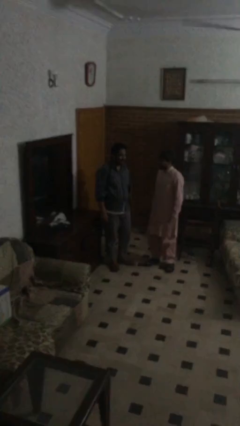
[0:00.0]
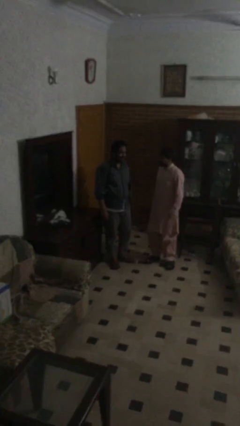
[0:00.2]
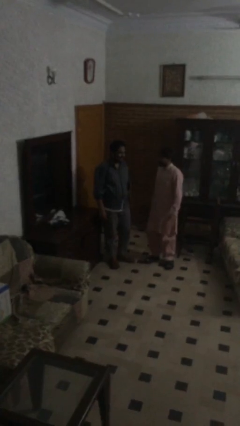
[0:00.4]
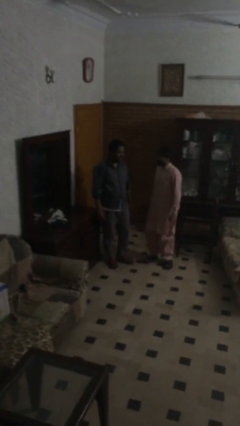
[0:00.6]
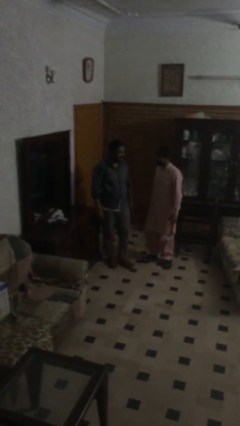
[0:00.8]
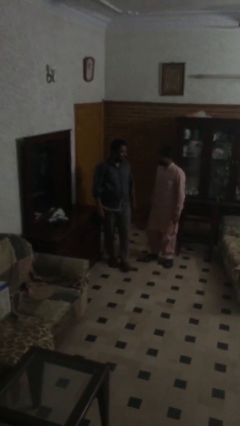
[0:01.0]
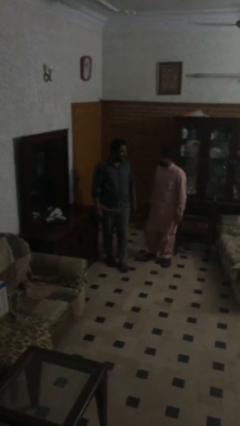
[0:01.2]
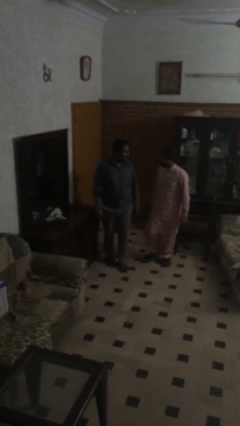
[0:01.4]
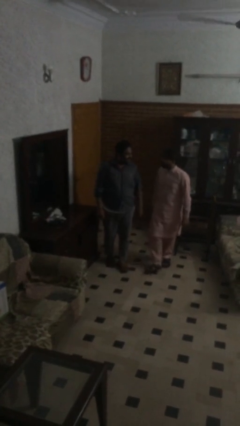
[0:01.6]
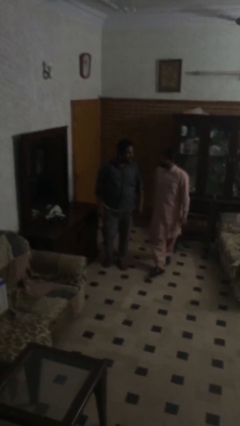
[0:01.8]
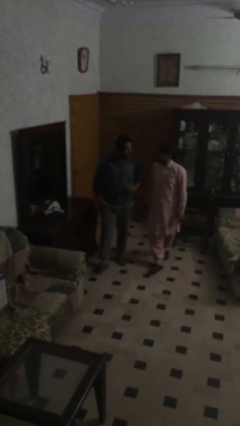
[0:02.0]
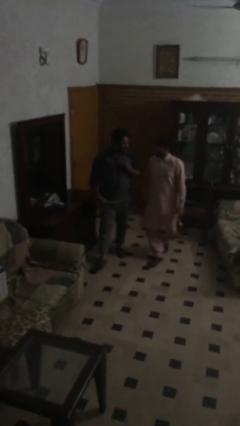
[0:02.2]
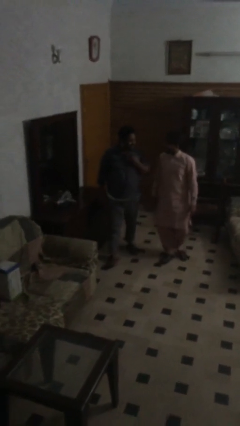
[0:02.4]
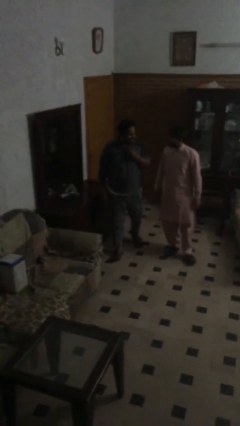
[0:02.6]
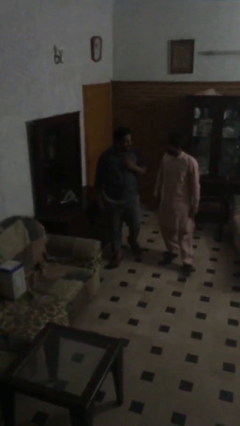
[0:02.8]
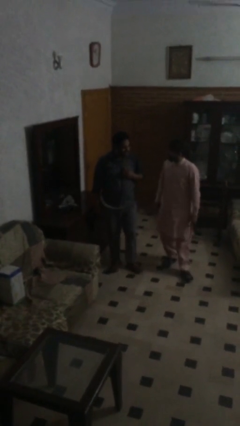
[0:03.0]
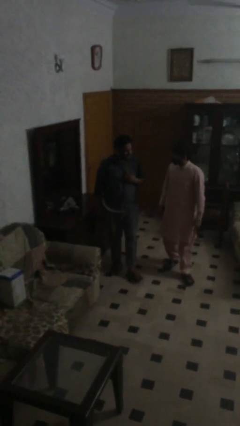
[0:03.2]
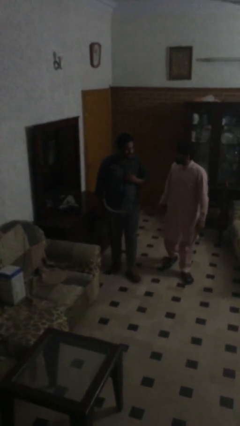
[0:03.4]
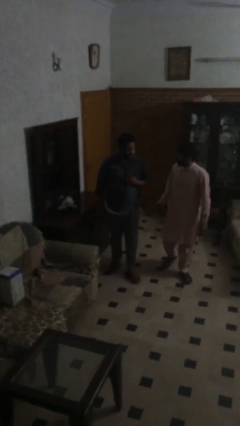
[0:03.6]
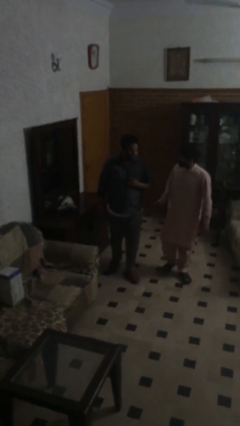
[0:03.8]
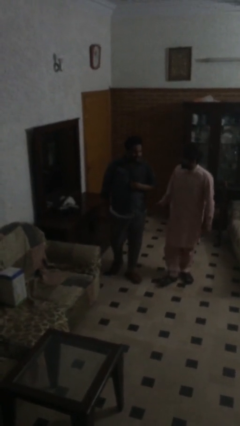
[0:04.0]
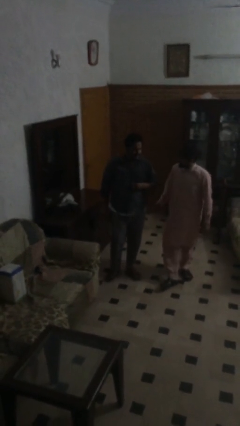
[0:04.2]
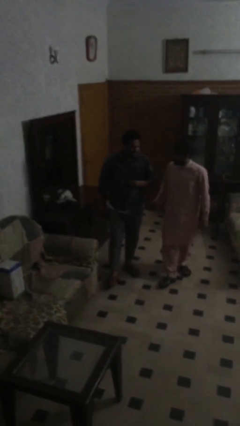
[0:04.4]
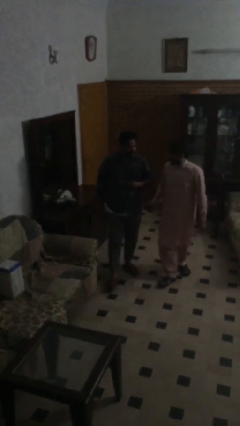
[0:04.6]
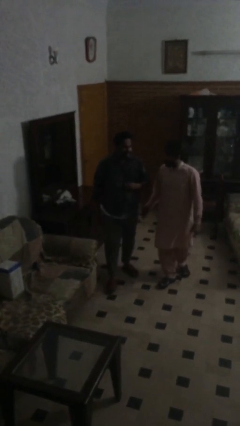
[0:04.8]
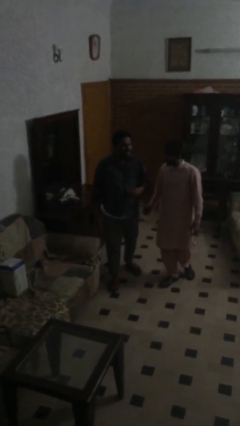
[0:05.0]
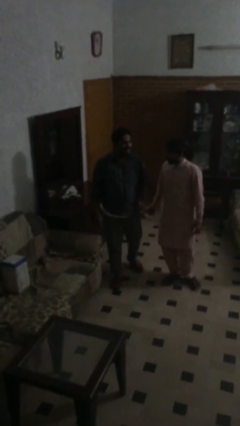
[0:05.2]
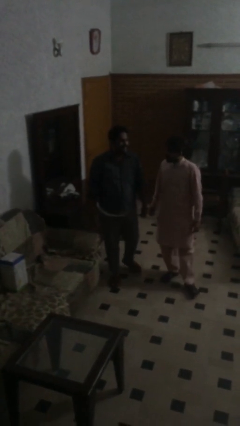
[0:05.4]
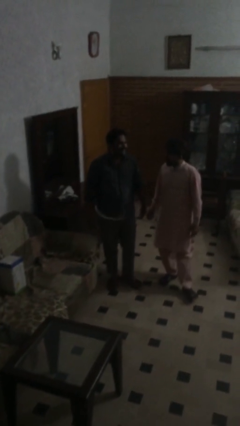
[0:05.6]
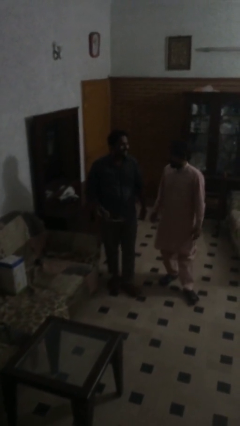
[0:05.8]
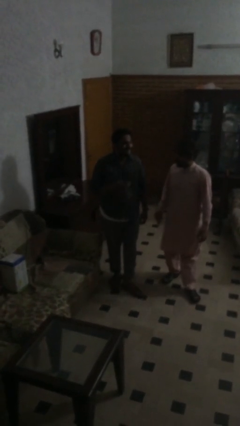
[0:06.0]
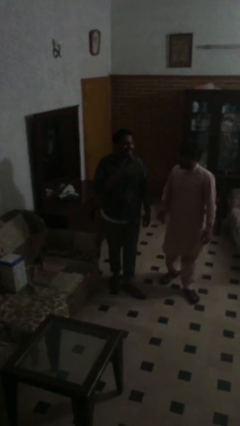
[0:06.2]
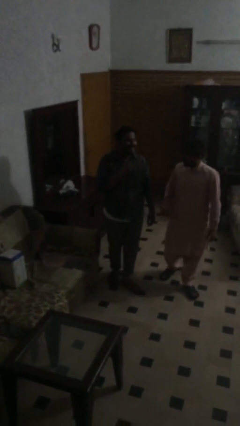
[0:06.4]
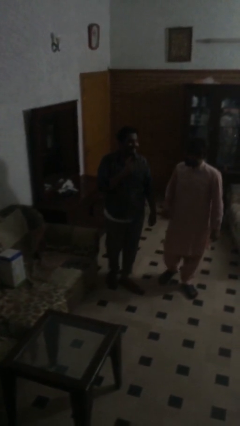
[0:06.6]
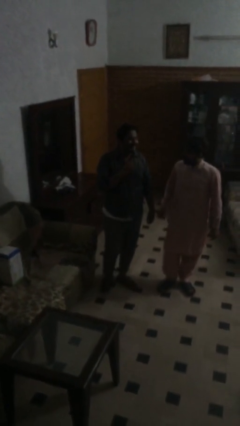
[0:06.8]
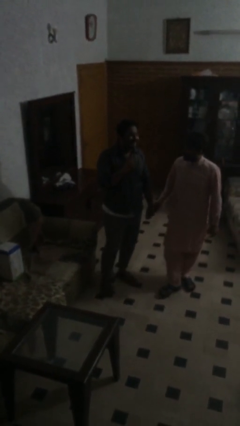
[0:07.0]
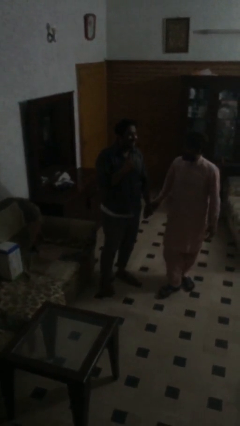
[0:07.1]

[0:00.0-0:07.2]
person talks to person

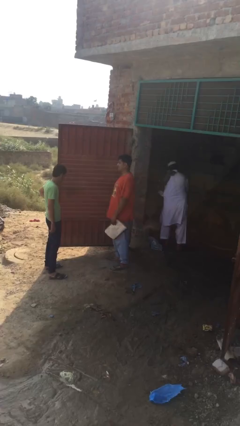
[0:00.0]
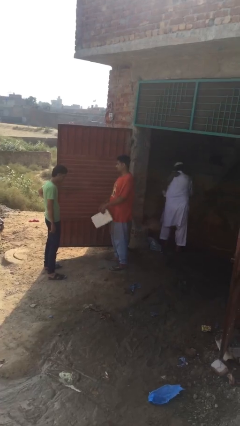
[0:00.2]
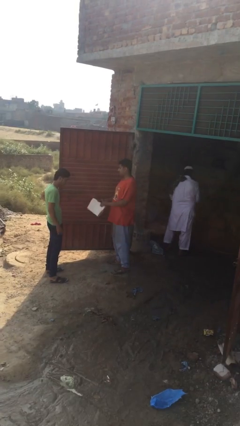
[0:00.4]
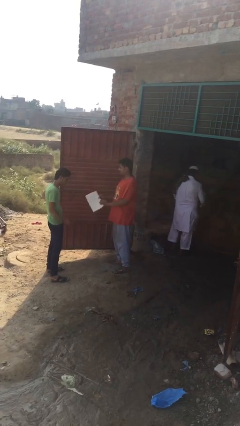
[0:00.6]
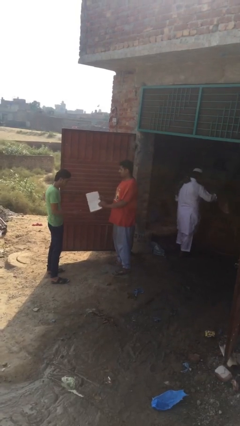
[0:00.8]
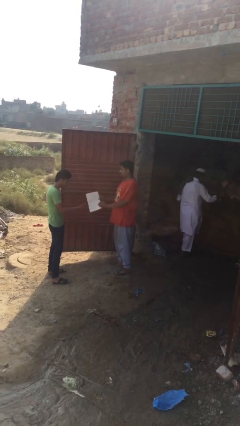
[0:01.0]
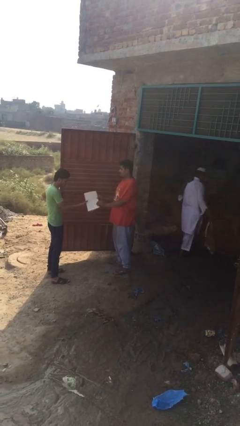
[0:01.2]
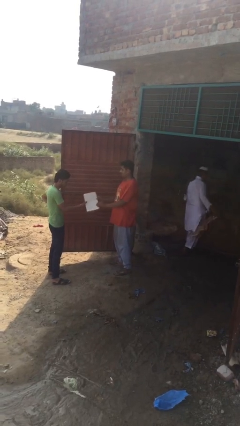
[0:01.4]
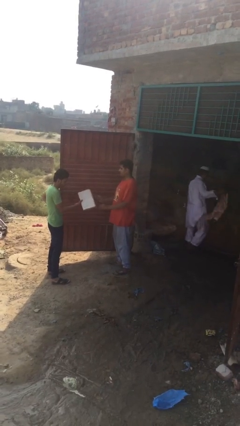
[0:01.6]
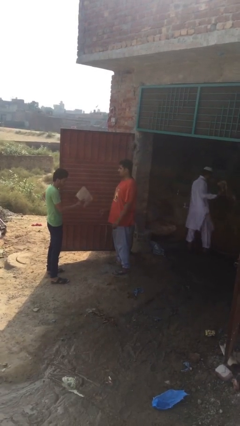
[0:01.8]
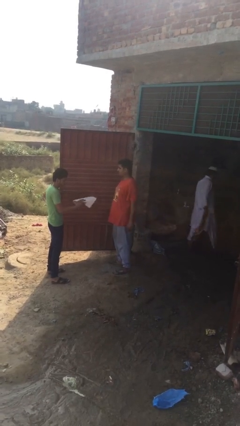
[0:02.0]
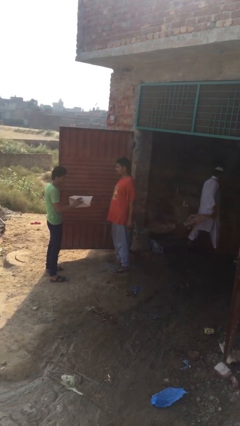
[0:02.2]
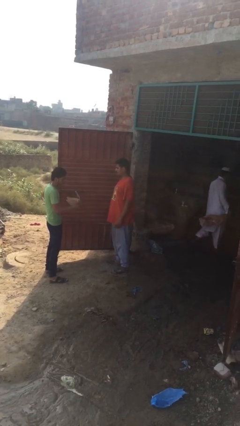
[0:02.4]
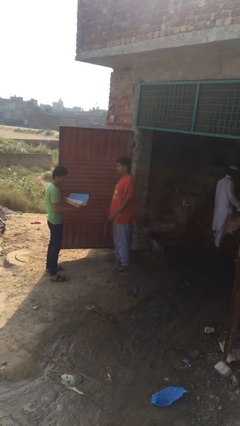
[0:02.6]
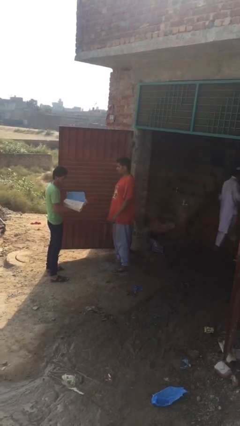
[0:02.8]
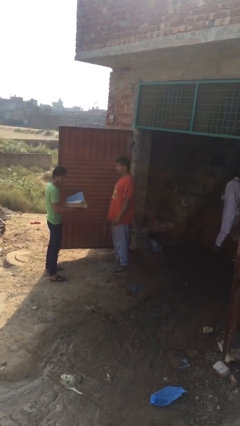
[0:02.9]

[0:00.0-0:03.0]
person transfers object to person

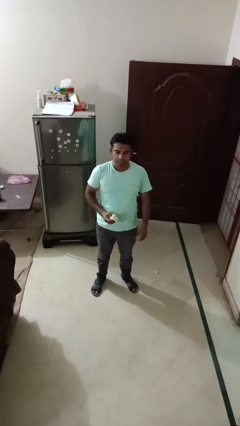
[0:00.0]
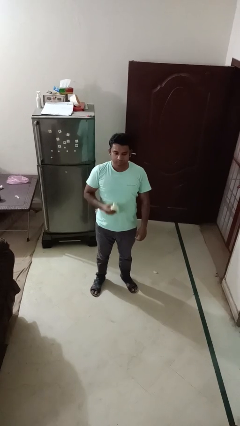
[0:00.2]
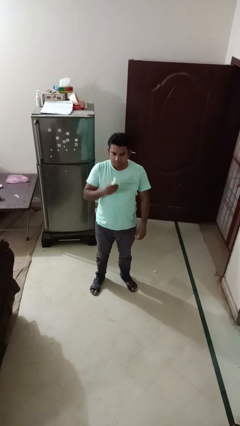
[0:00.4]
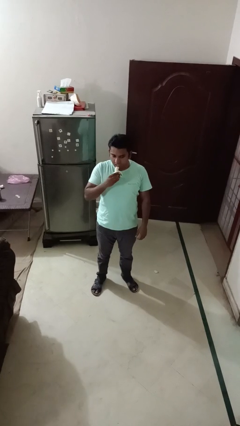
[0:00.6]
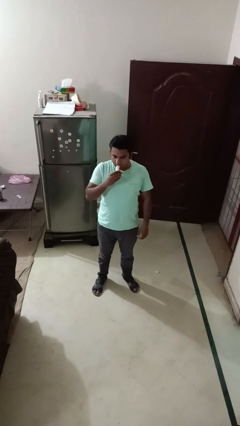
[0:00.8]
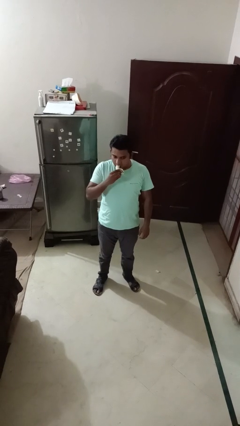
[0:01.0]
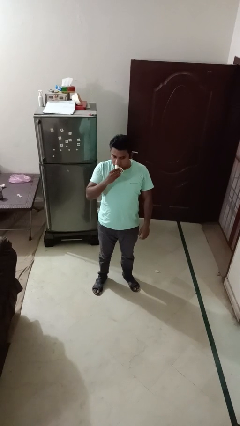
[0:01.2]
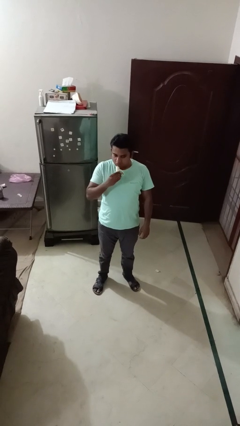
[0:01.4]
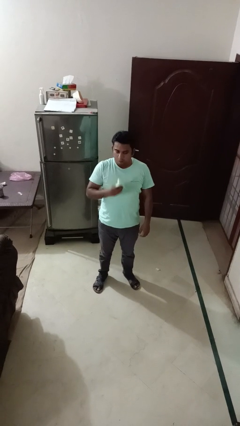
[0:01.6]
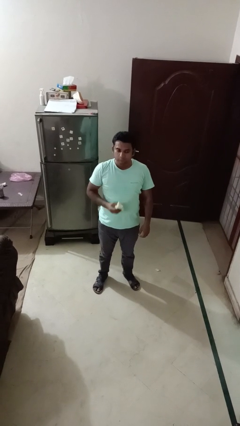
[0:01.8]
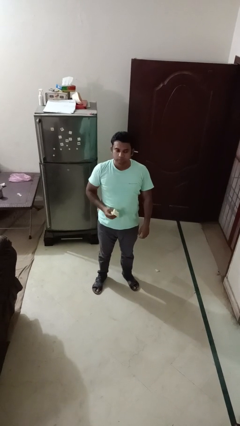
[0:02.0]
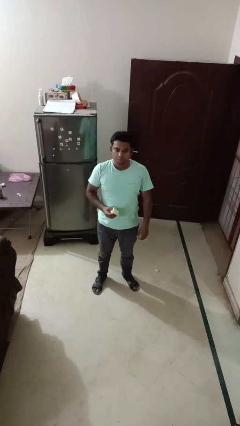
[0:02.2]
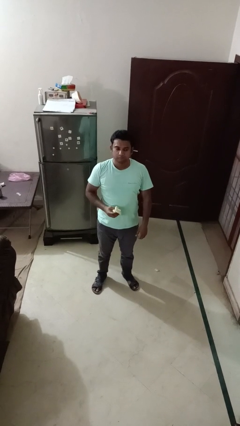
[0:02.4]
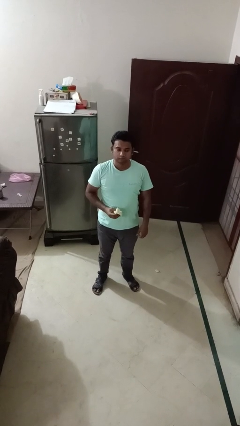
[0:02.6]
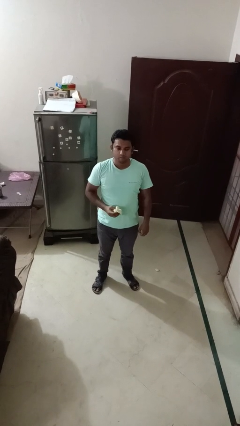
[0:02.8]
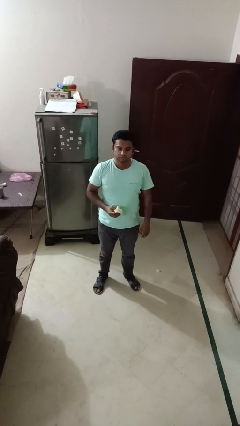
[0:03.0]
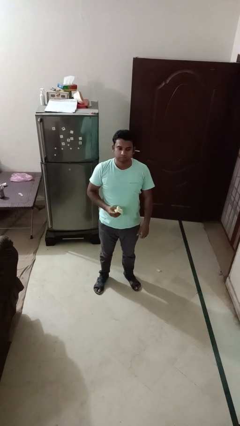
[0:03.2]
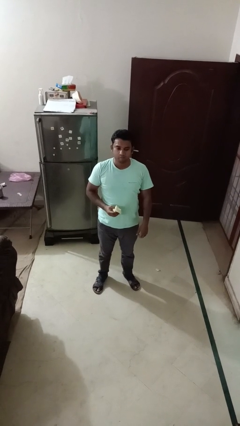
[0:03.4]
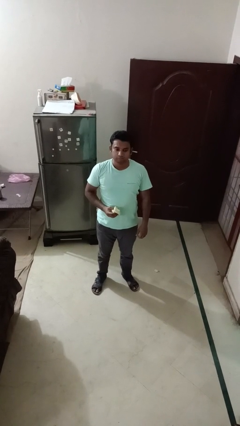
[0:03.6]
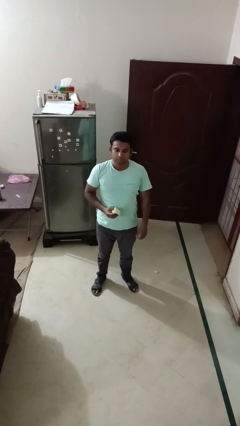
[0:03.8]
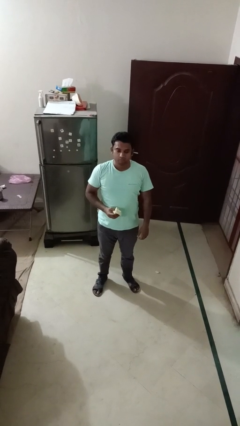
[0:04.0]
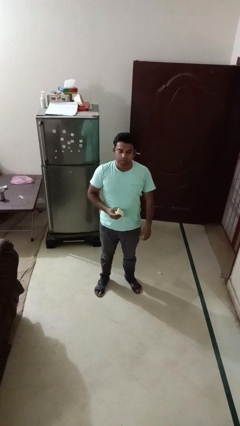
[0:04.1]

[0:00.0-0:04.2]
person eats banana

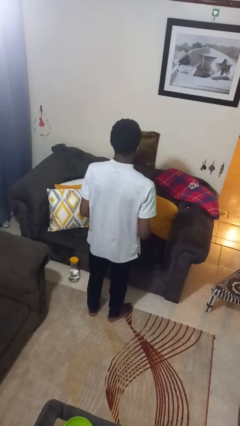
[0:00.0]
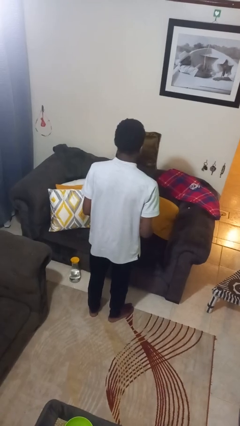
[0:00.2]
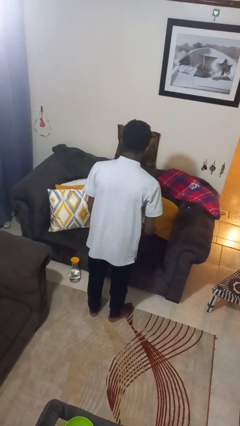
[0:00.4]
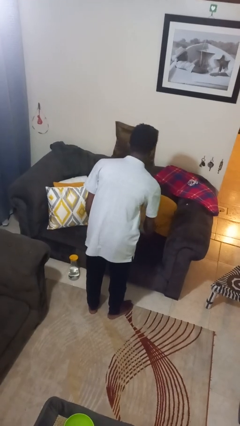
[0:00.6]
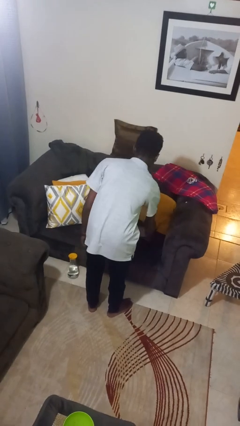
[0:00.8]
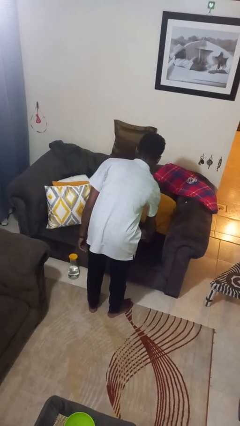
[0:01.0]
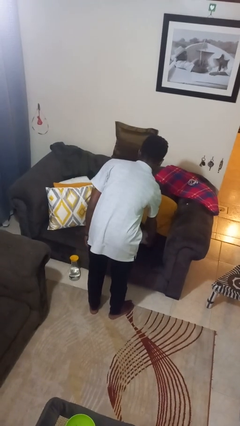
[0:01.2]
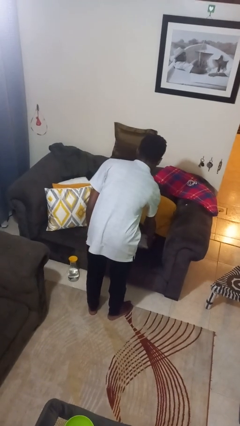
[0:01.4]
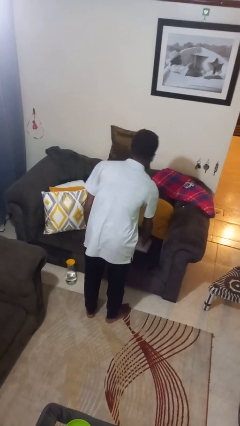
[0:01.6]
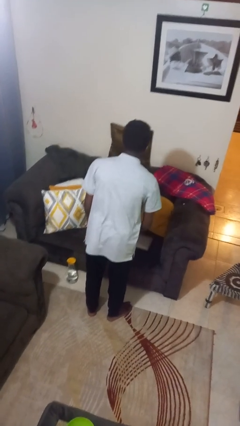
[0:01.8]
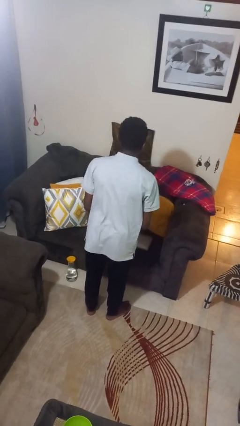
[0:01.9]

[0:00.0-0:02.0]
person puts down object on couch

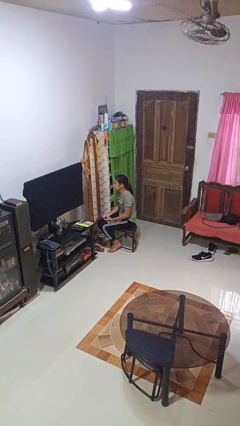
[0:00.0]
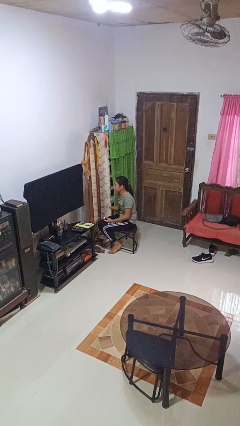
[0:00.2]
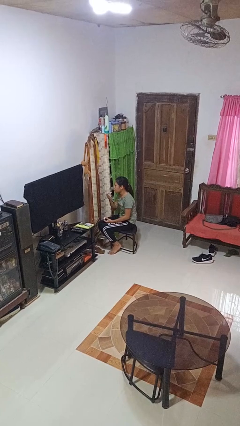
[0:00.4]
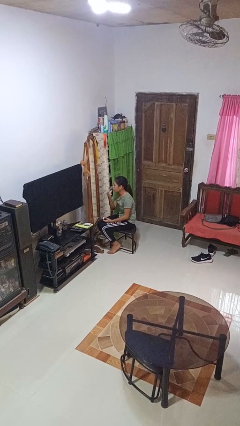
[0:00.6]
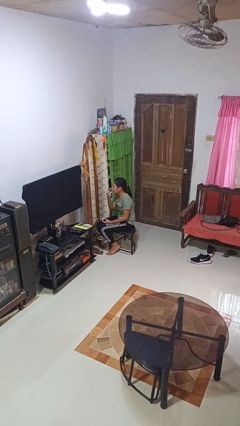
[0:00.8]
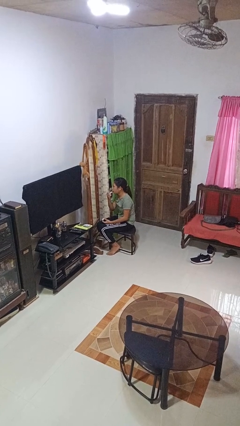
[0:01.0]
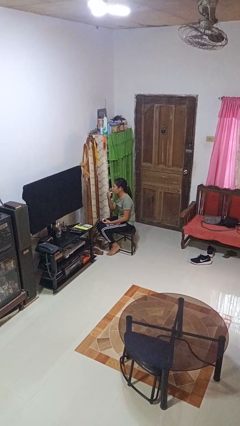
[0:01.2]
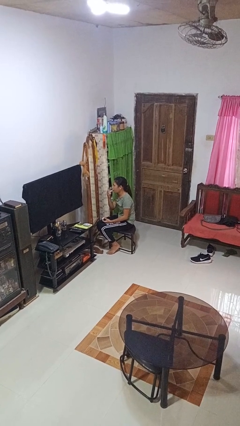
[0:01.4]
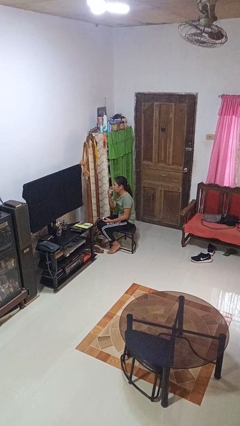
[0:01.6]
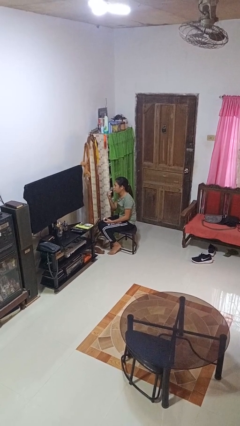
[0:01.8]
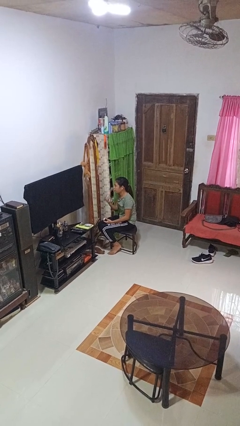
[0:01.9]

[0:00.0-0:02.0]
person applies lip makeup
